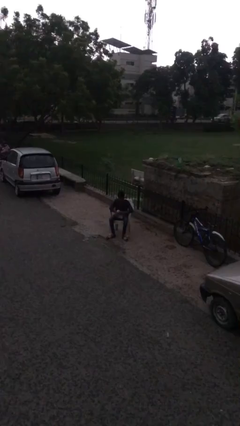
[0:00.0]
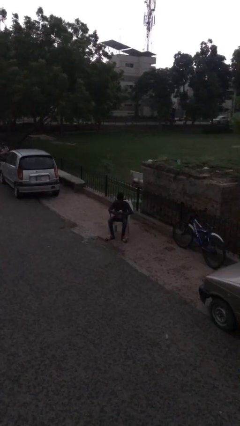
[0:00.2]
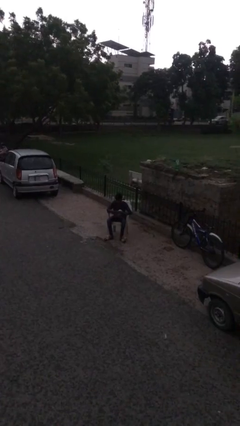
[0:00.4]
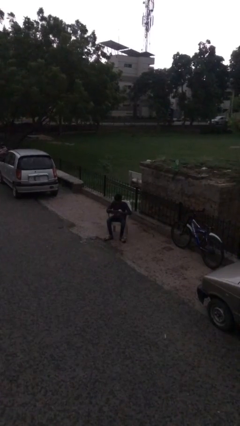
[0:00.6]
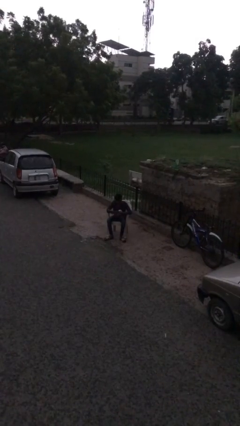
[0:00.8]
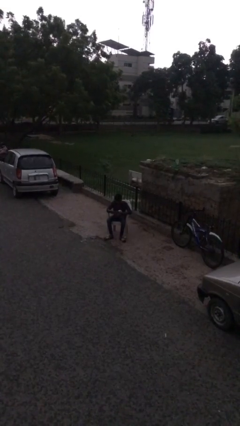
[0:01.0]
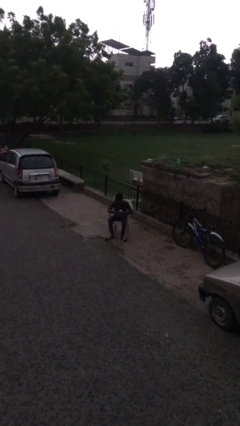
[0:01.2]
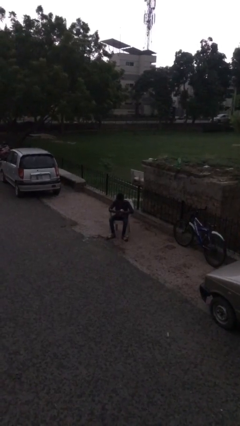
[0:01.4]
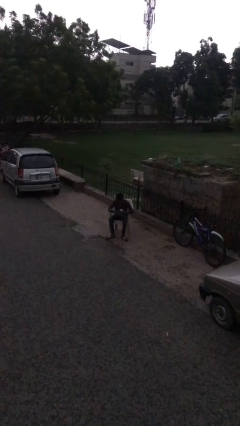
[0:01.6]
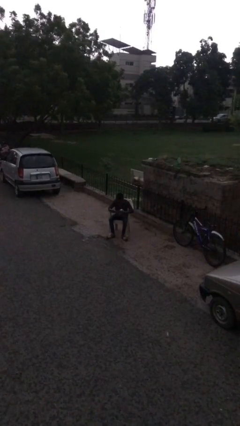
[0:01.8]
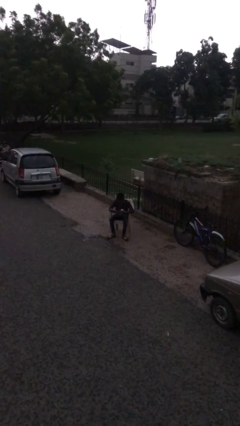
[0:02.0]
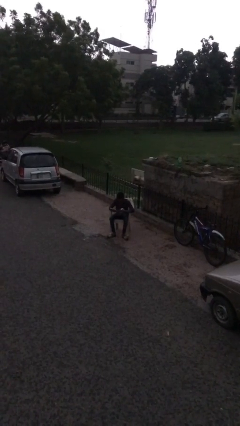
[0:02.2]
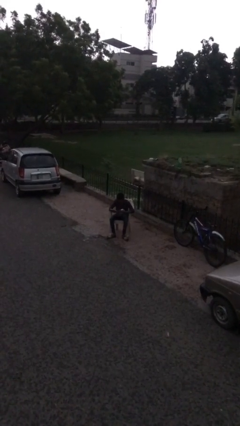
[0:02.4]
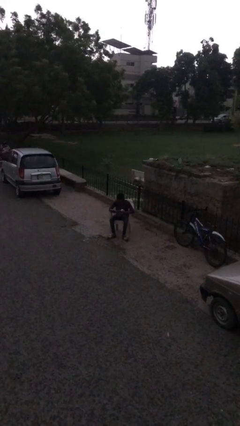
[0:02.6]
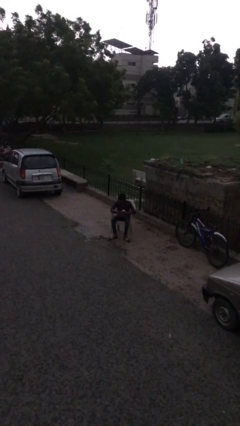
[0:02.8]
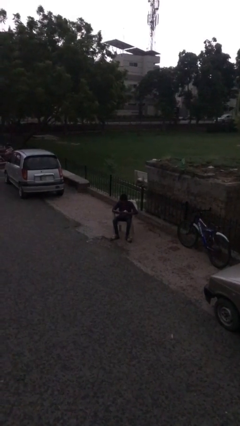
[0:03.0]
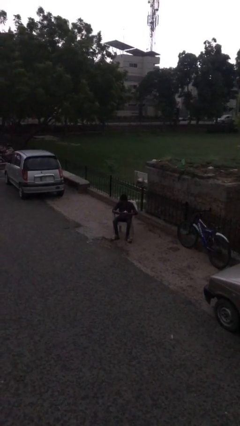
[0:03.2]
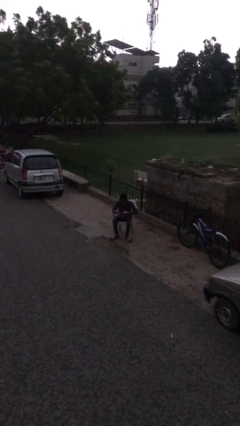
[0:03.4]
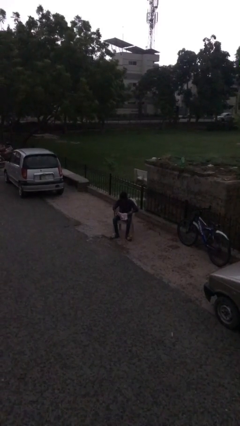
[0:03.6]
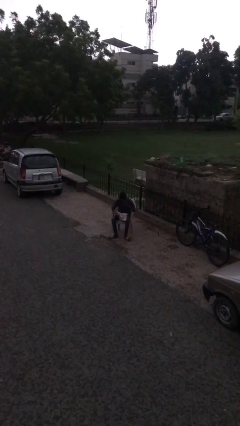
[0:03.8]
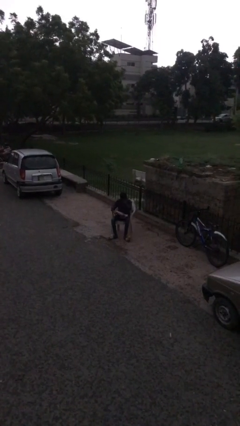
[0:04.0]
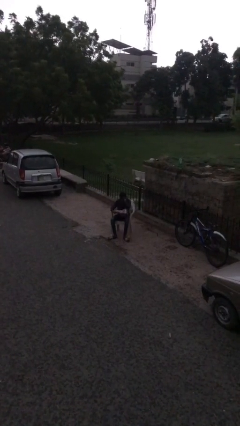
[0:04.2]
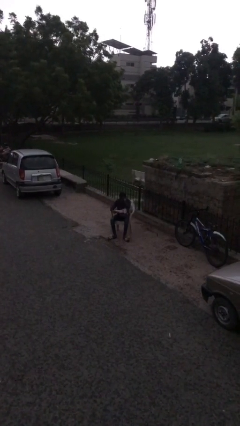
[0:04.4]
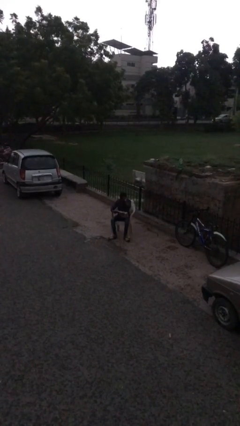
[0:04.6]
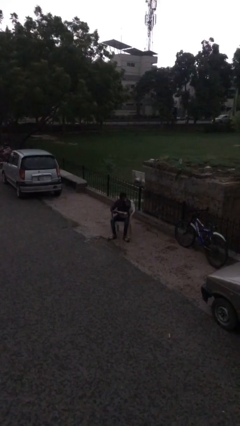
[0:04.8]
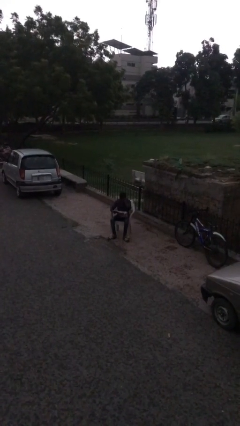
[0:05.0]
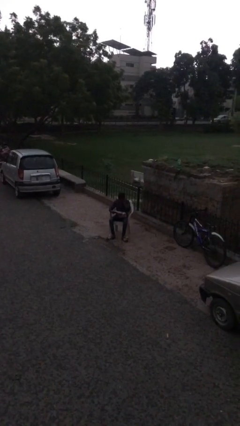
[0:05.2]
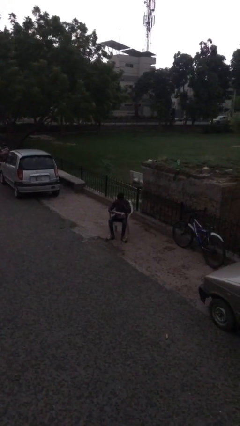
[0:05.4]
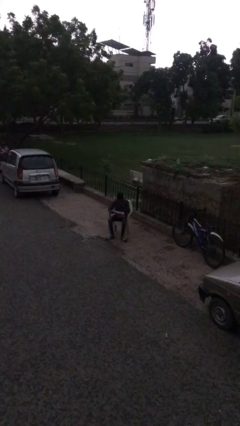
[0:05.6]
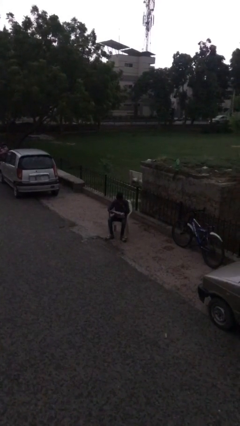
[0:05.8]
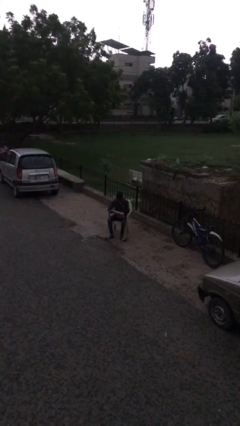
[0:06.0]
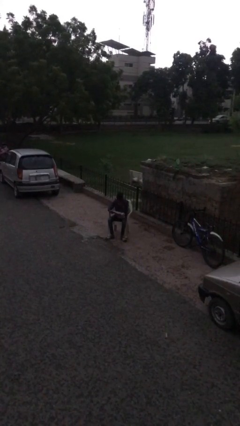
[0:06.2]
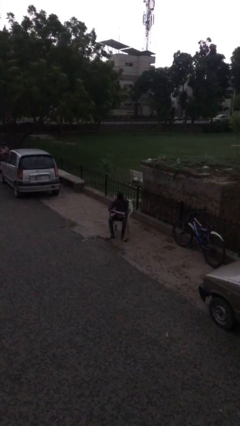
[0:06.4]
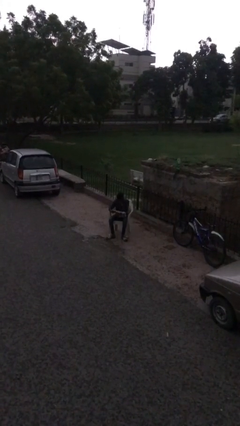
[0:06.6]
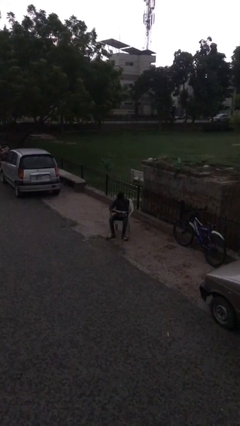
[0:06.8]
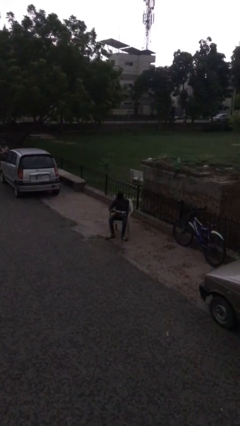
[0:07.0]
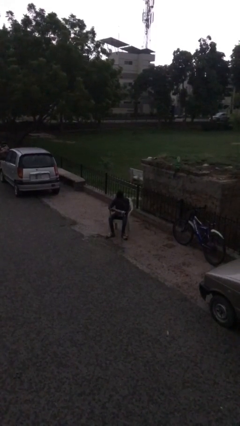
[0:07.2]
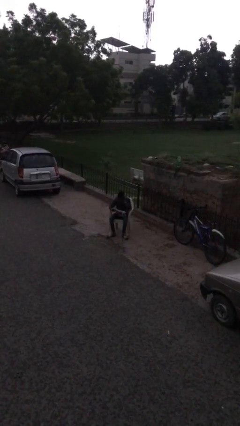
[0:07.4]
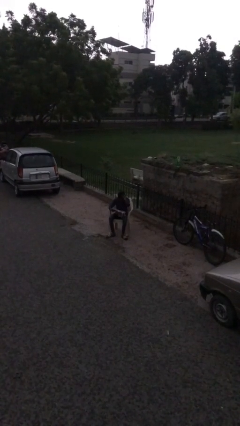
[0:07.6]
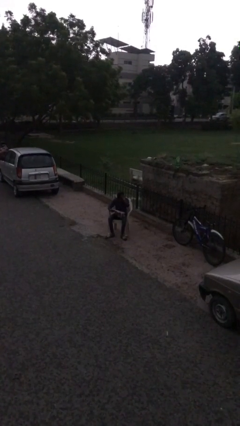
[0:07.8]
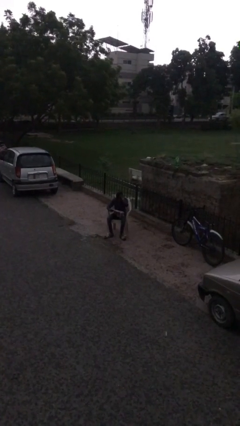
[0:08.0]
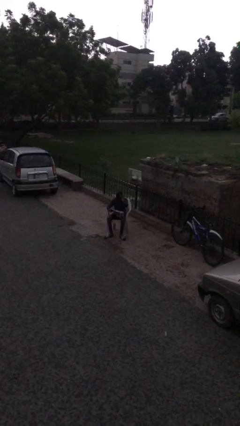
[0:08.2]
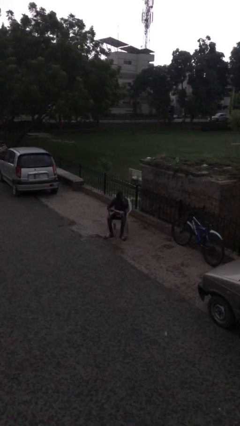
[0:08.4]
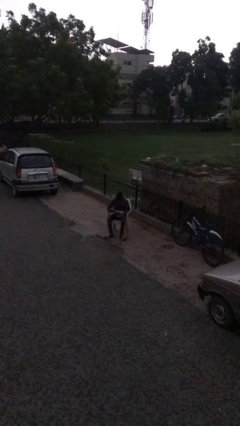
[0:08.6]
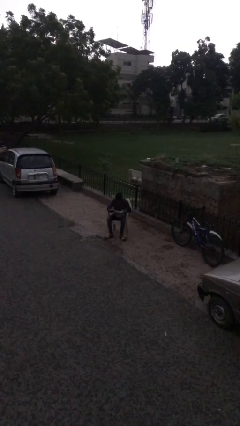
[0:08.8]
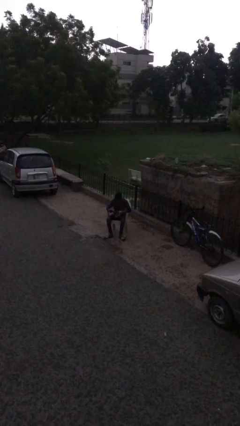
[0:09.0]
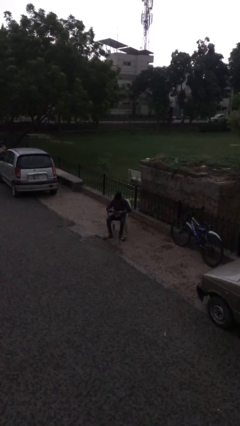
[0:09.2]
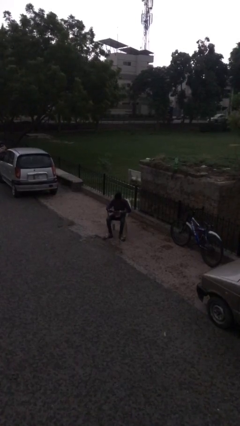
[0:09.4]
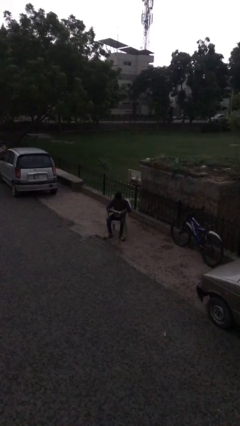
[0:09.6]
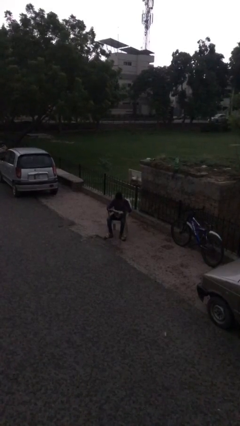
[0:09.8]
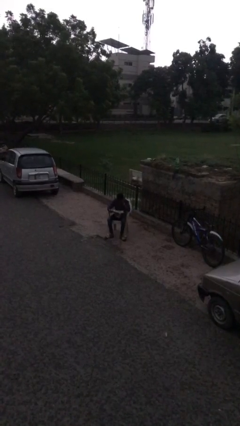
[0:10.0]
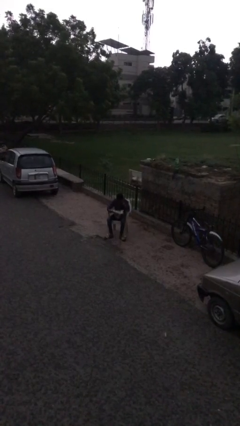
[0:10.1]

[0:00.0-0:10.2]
person reads document

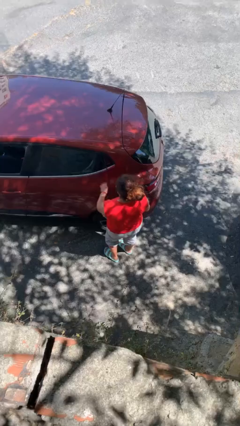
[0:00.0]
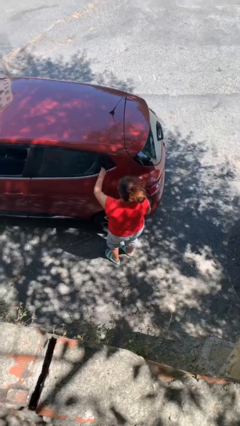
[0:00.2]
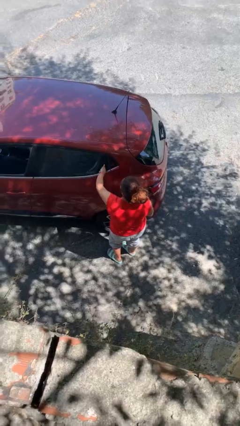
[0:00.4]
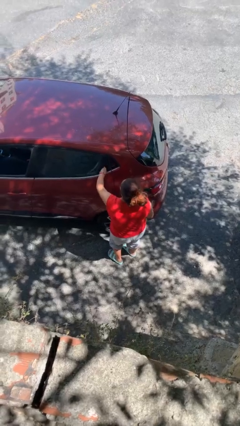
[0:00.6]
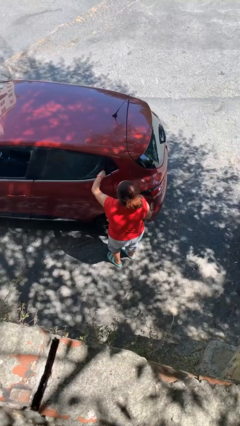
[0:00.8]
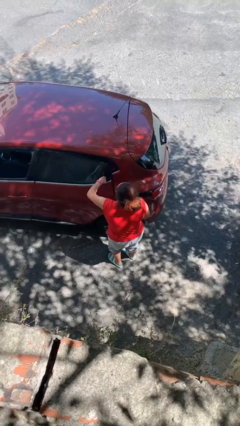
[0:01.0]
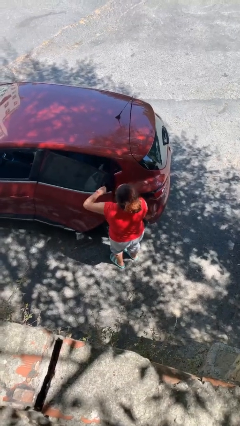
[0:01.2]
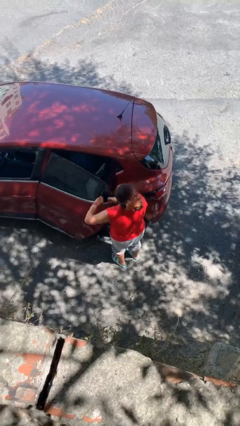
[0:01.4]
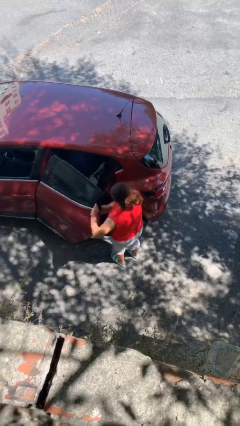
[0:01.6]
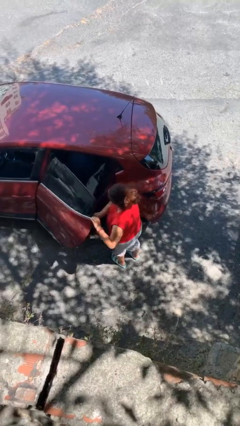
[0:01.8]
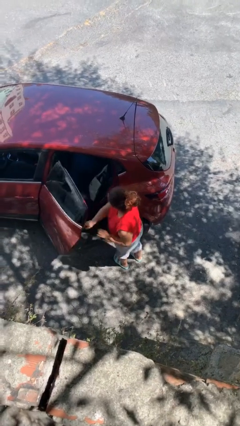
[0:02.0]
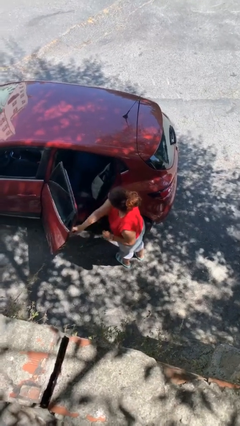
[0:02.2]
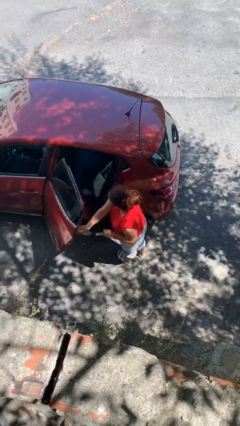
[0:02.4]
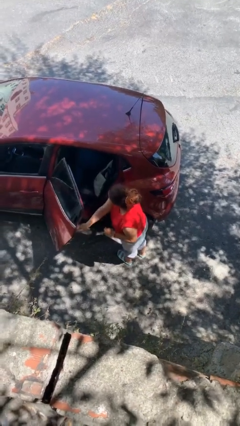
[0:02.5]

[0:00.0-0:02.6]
person opens car door

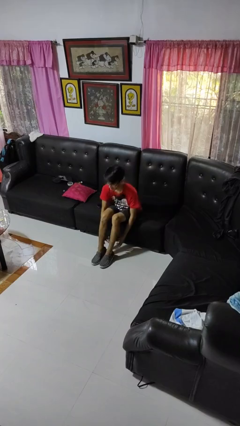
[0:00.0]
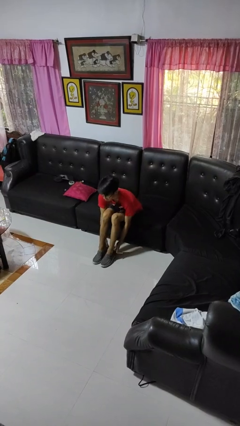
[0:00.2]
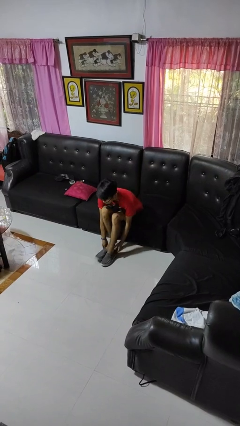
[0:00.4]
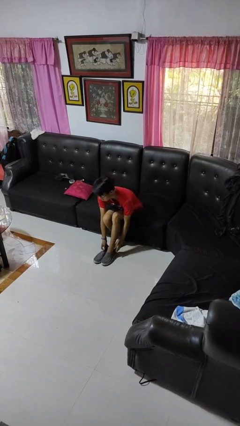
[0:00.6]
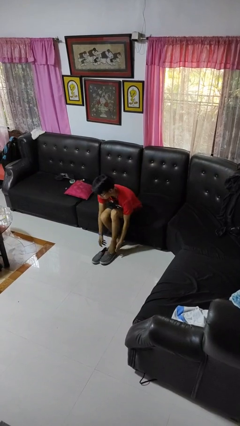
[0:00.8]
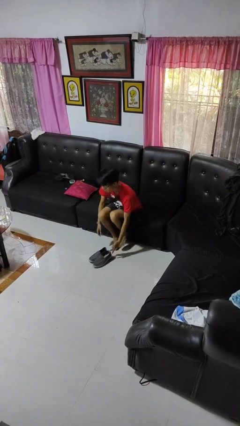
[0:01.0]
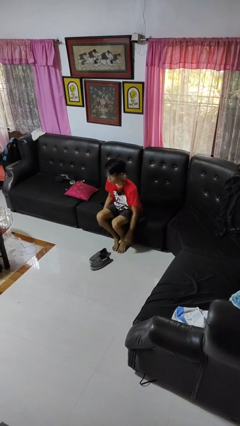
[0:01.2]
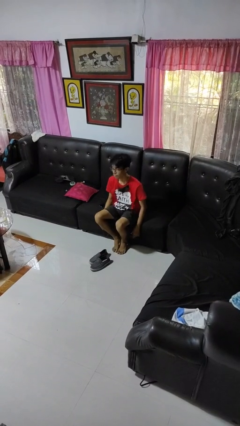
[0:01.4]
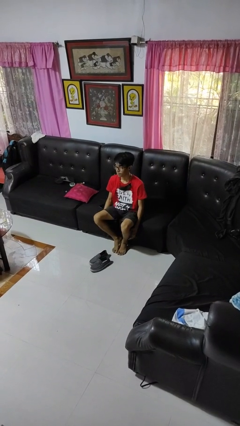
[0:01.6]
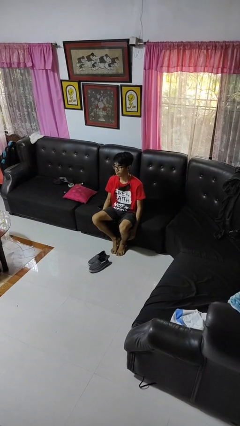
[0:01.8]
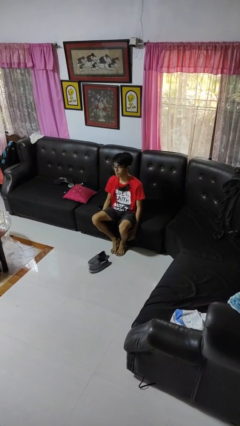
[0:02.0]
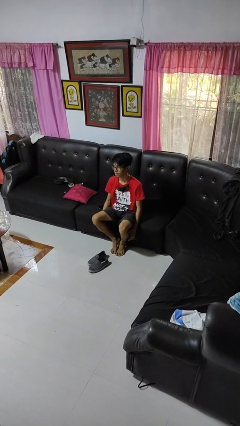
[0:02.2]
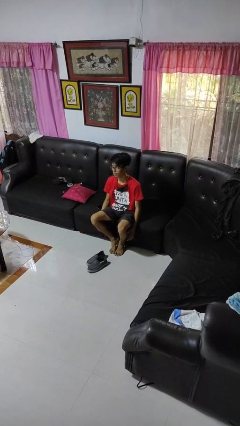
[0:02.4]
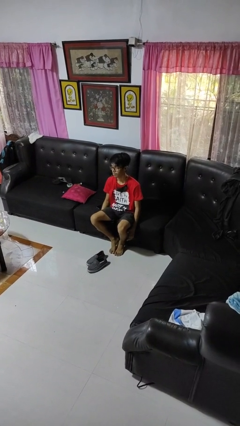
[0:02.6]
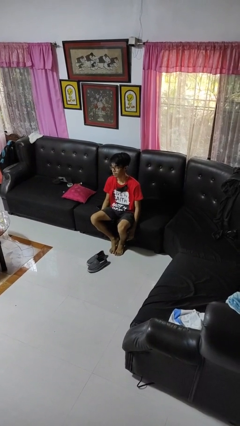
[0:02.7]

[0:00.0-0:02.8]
person takes off shoes

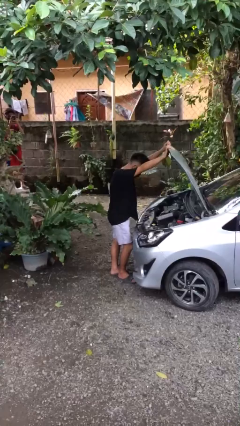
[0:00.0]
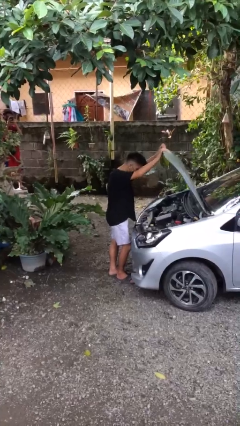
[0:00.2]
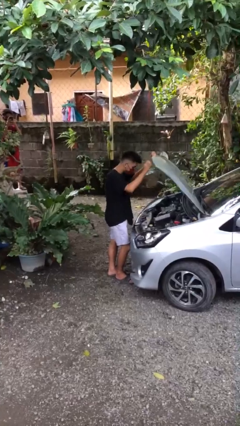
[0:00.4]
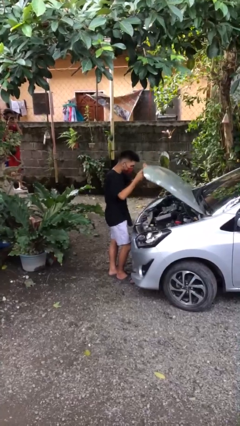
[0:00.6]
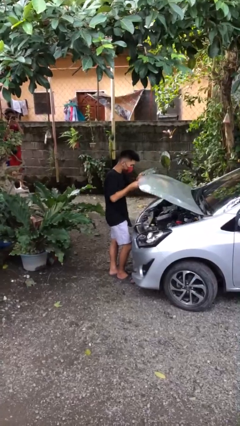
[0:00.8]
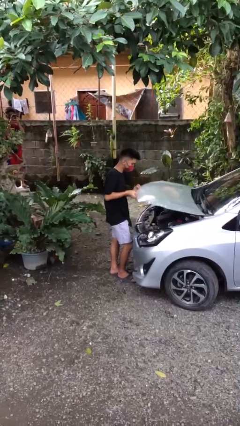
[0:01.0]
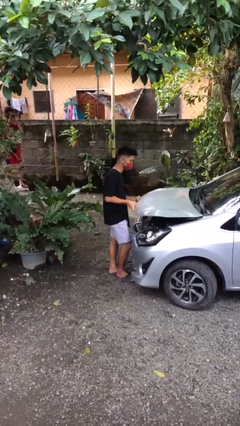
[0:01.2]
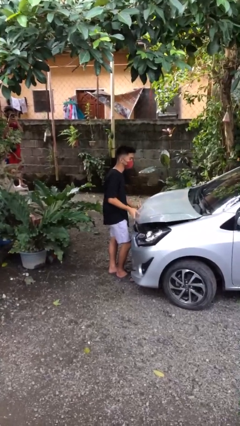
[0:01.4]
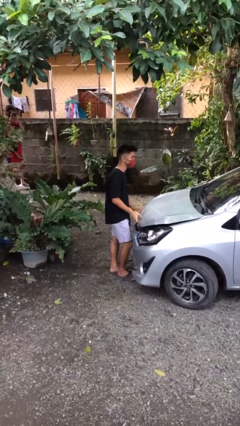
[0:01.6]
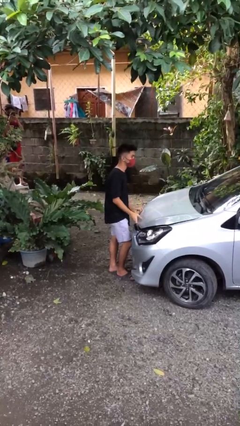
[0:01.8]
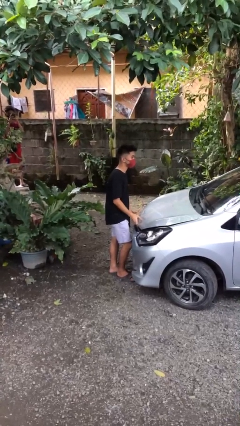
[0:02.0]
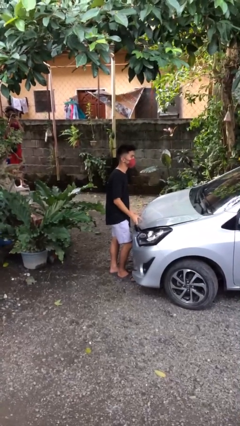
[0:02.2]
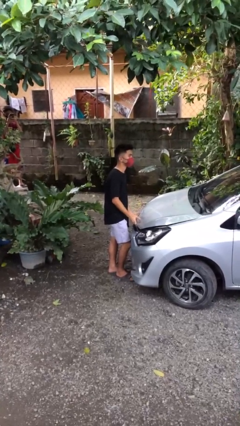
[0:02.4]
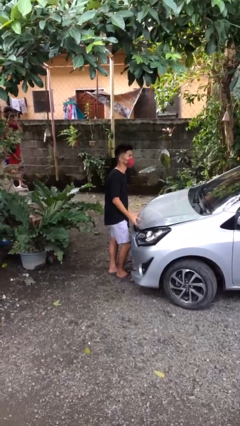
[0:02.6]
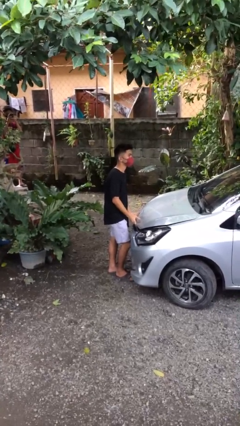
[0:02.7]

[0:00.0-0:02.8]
person closes car hood
